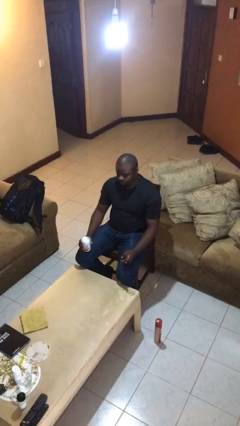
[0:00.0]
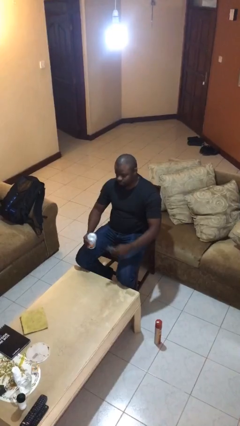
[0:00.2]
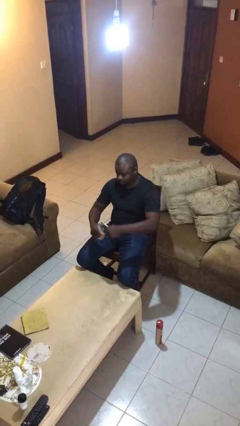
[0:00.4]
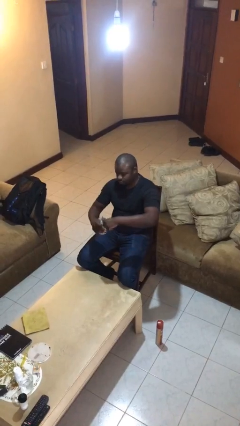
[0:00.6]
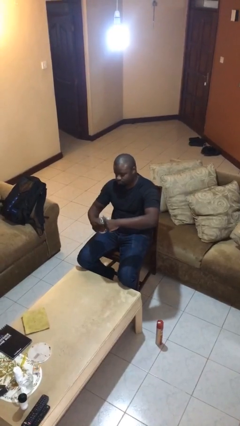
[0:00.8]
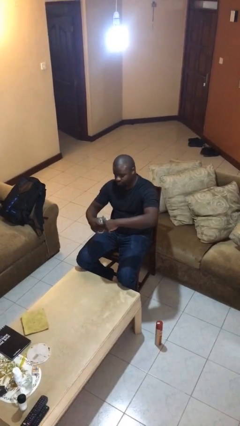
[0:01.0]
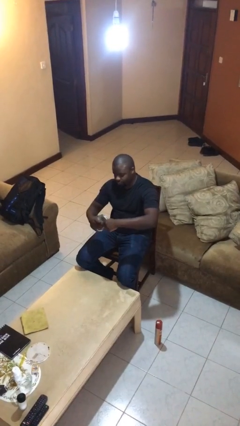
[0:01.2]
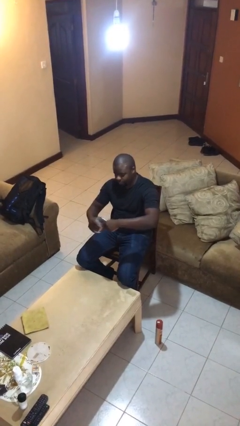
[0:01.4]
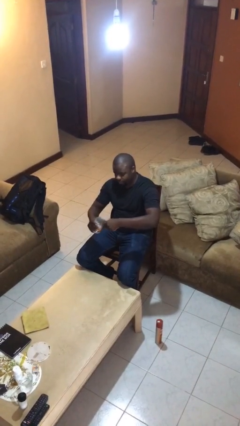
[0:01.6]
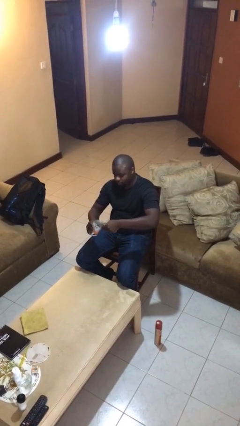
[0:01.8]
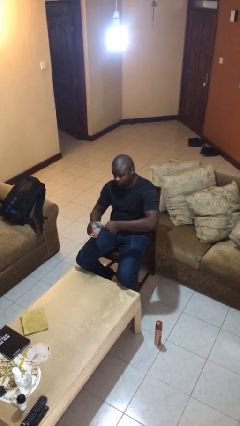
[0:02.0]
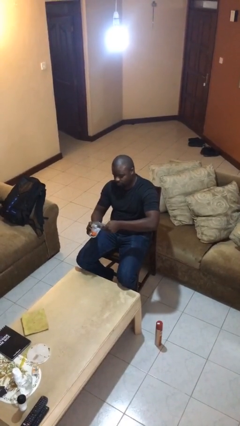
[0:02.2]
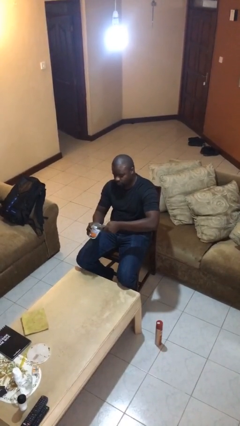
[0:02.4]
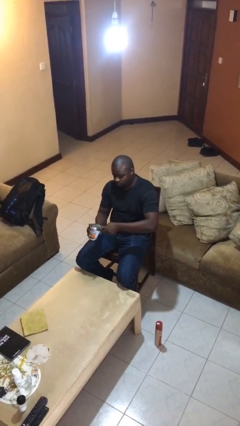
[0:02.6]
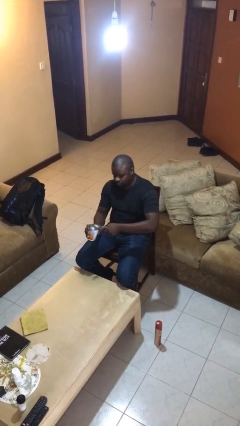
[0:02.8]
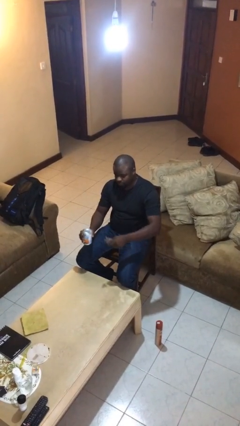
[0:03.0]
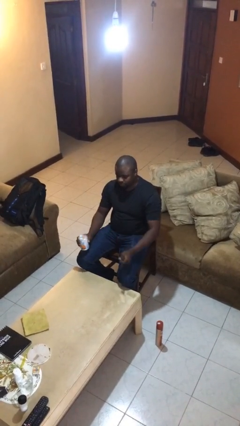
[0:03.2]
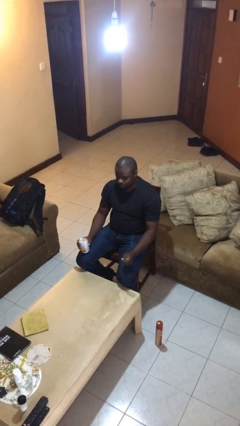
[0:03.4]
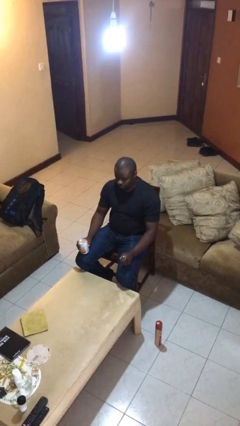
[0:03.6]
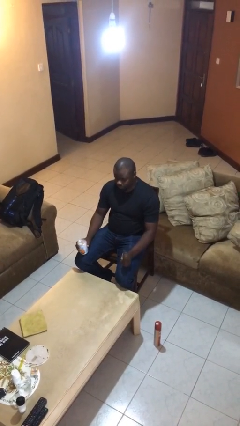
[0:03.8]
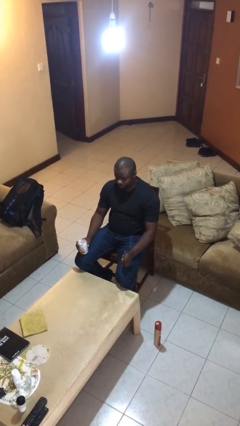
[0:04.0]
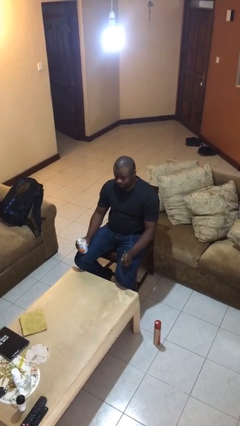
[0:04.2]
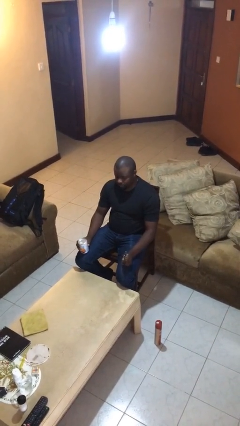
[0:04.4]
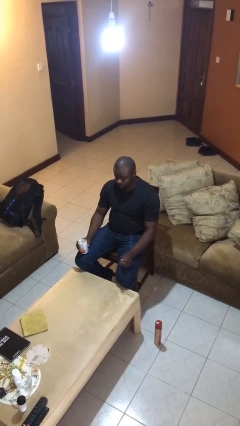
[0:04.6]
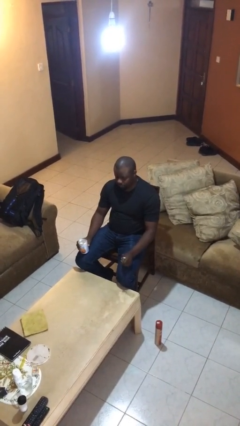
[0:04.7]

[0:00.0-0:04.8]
person opens can with can opener

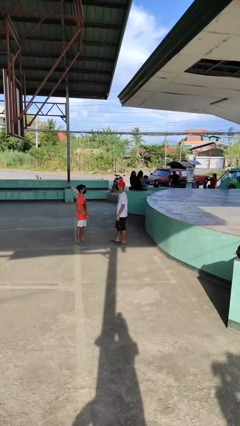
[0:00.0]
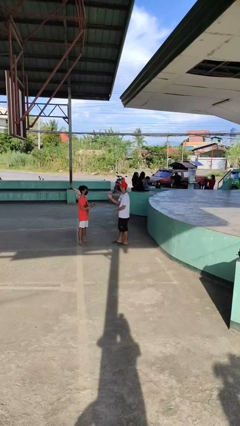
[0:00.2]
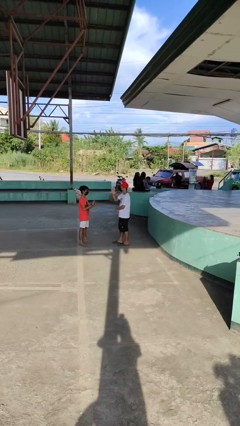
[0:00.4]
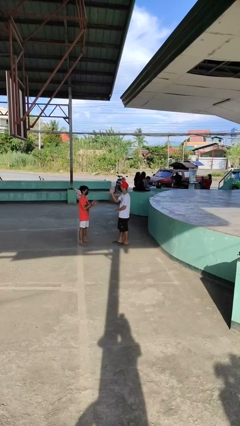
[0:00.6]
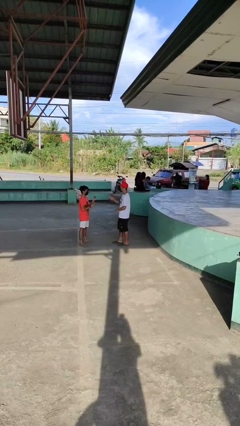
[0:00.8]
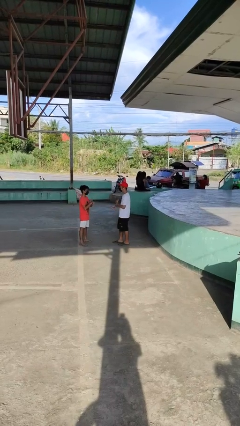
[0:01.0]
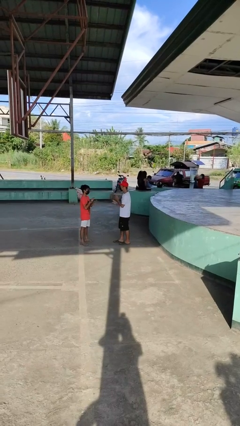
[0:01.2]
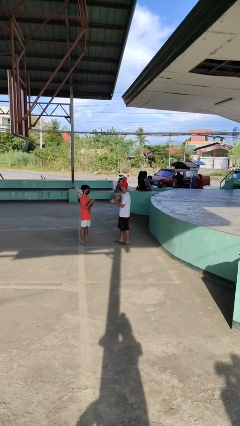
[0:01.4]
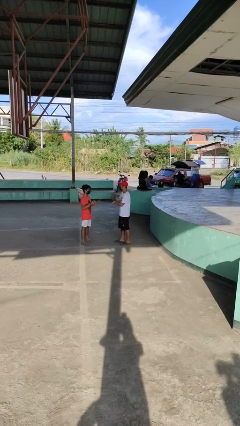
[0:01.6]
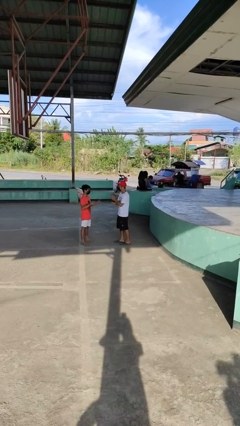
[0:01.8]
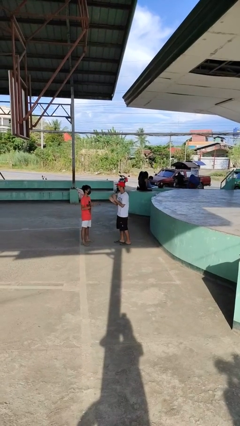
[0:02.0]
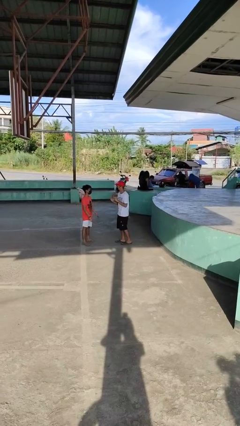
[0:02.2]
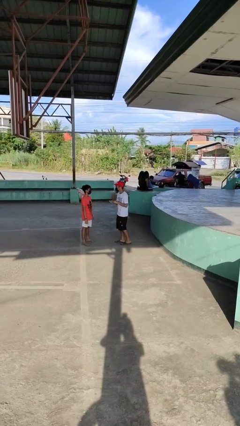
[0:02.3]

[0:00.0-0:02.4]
person talks to person

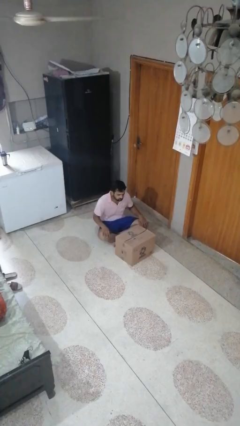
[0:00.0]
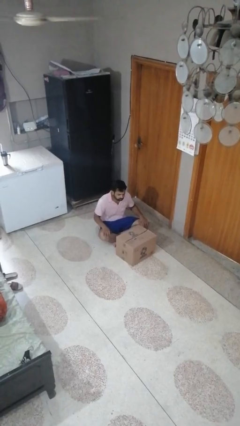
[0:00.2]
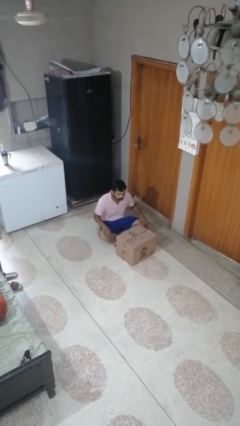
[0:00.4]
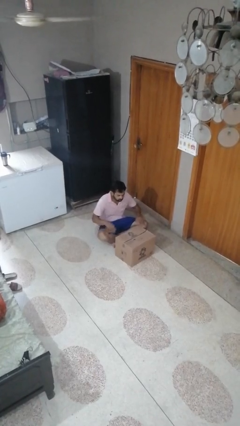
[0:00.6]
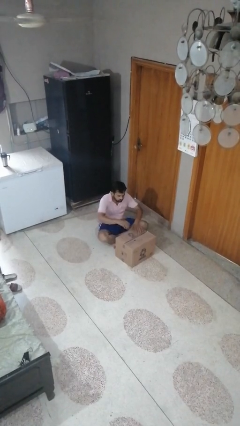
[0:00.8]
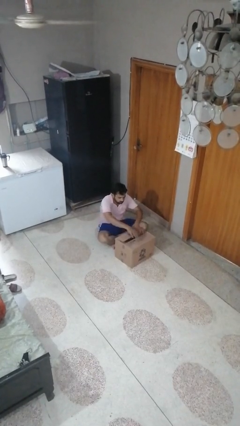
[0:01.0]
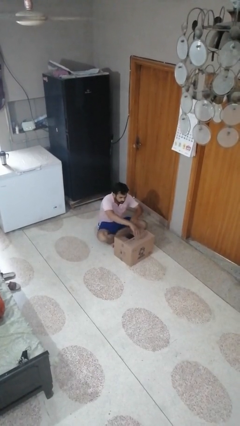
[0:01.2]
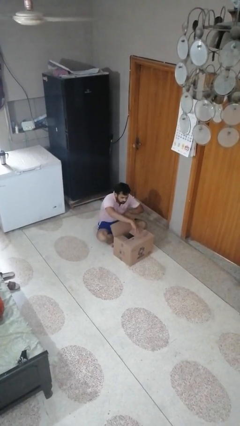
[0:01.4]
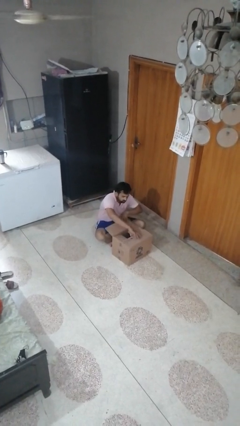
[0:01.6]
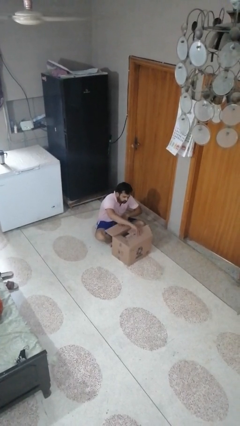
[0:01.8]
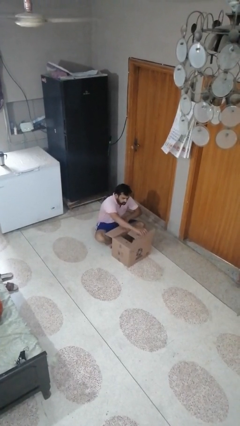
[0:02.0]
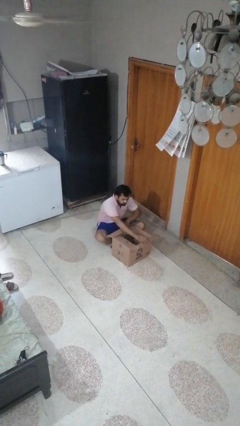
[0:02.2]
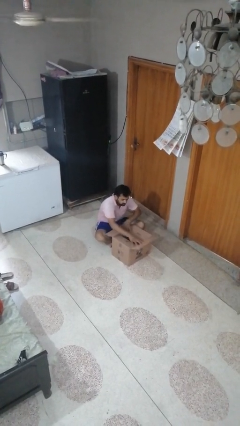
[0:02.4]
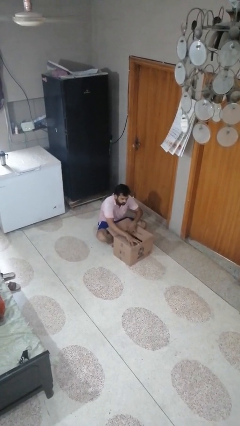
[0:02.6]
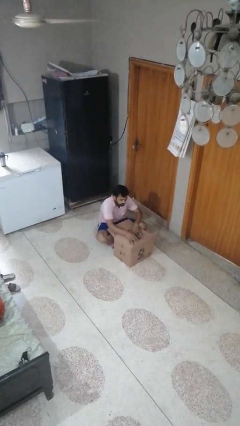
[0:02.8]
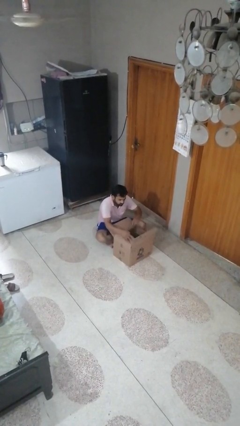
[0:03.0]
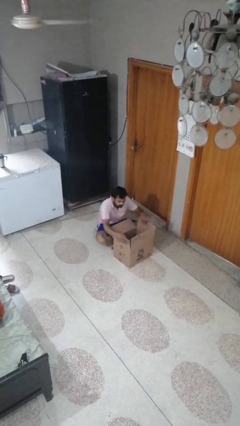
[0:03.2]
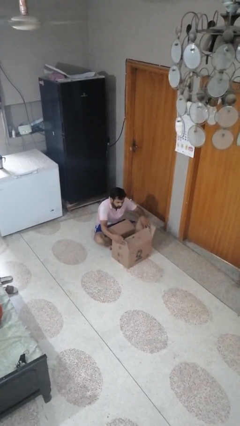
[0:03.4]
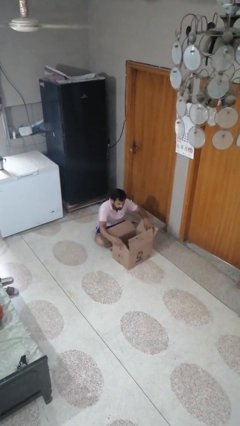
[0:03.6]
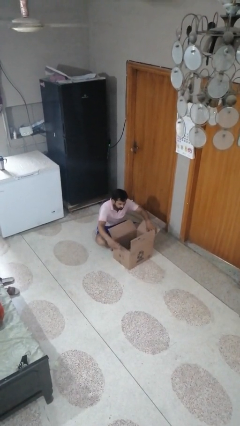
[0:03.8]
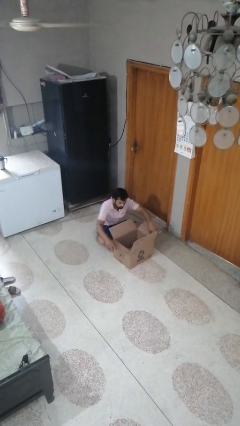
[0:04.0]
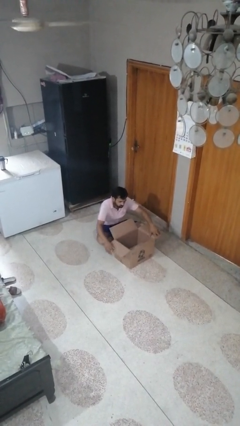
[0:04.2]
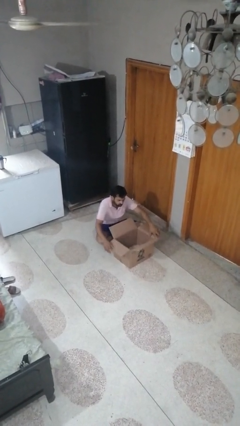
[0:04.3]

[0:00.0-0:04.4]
person opens box

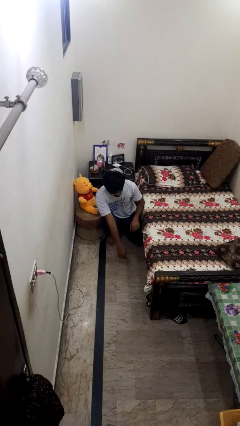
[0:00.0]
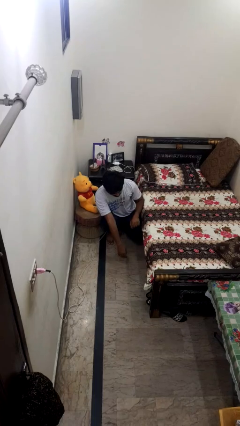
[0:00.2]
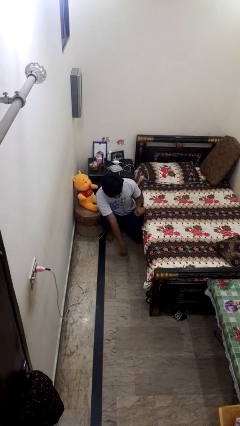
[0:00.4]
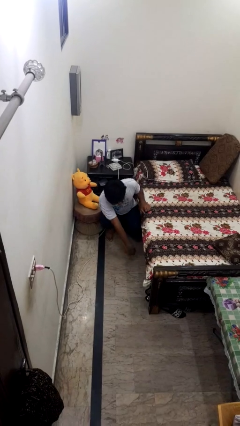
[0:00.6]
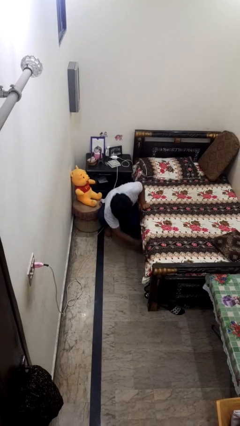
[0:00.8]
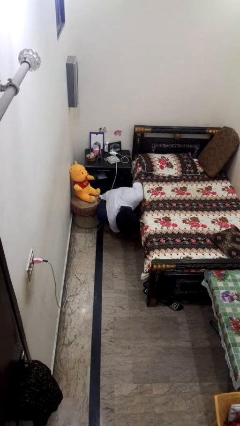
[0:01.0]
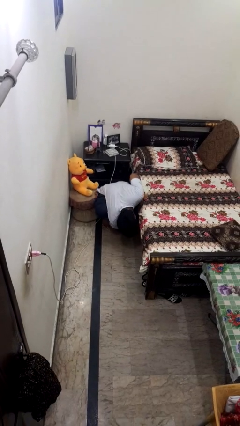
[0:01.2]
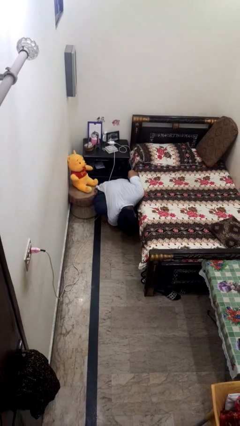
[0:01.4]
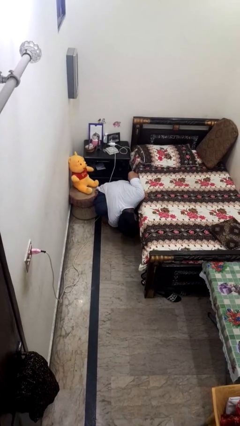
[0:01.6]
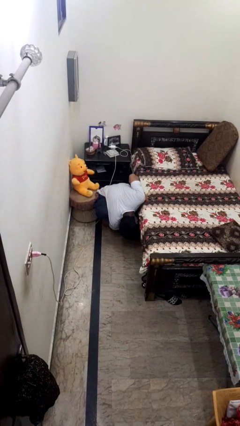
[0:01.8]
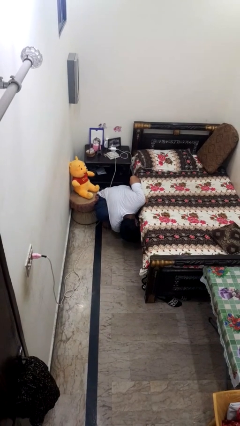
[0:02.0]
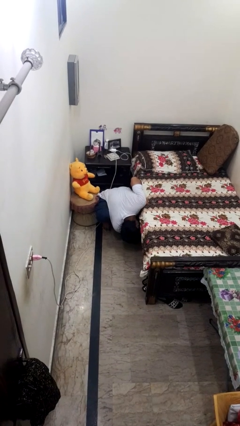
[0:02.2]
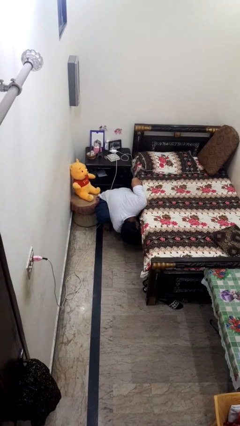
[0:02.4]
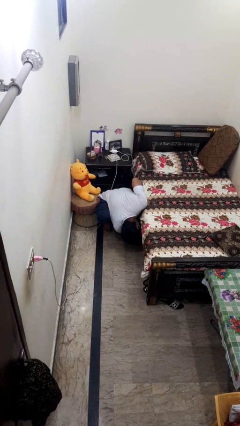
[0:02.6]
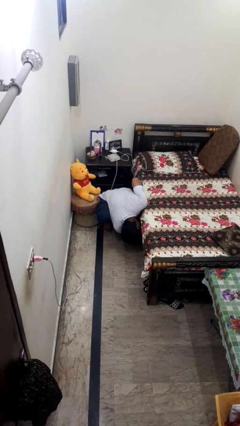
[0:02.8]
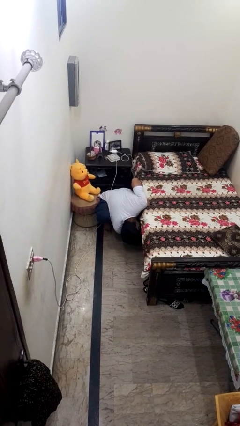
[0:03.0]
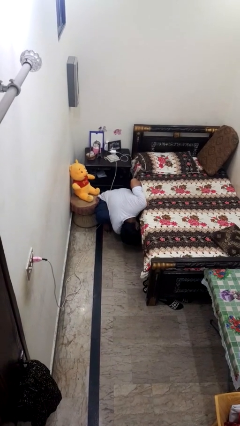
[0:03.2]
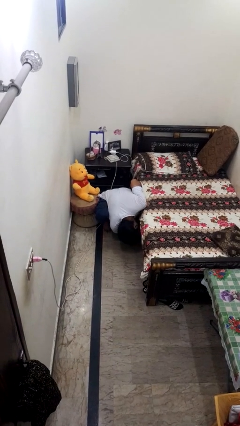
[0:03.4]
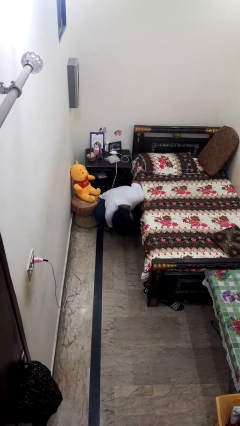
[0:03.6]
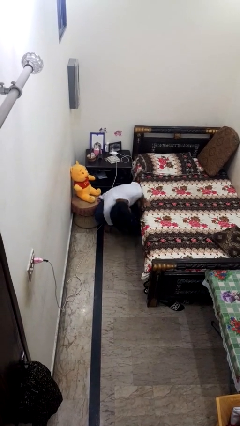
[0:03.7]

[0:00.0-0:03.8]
person searches under bed

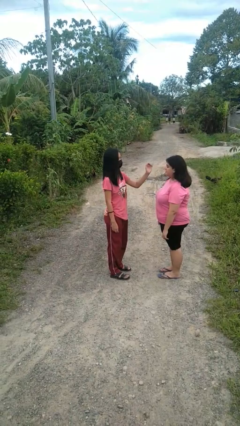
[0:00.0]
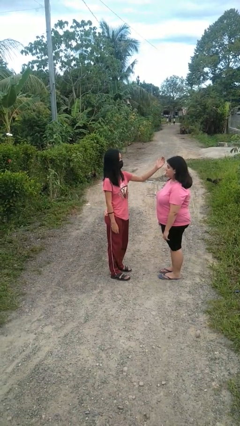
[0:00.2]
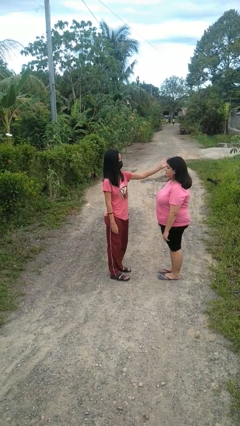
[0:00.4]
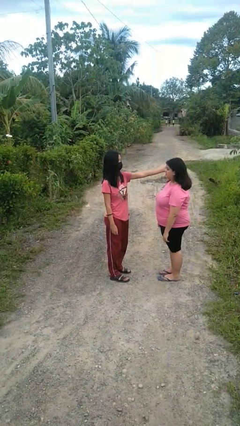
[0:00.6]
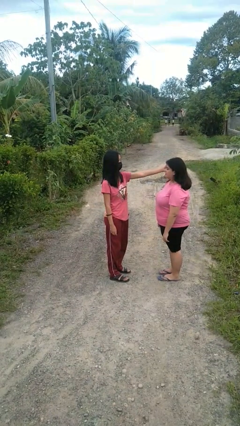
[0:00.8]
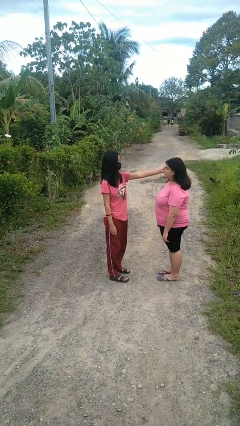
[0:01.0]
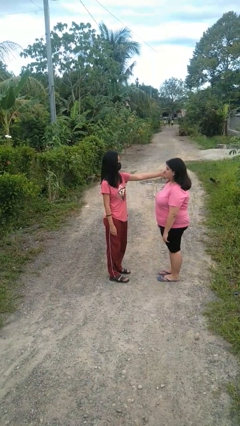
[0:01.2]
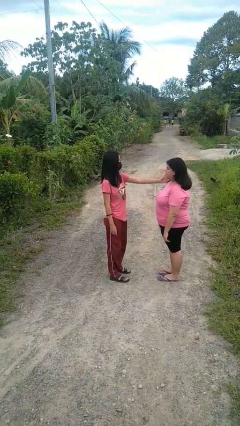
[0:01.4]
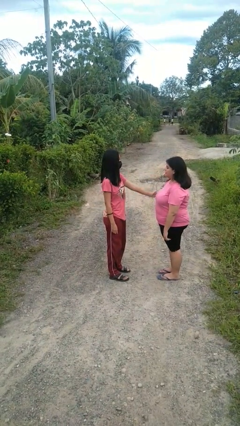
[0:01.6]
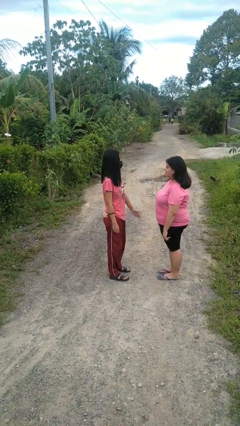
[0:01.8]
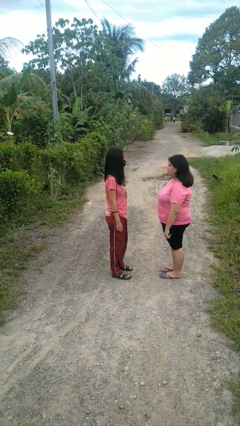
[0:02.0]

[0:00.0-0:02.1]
person touches face of person
